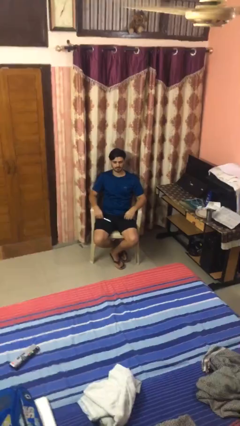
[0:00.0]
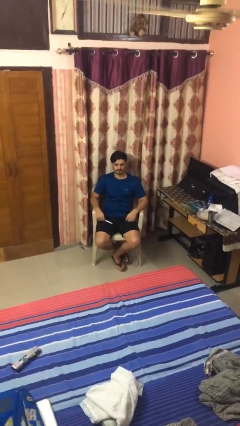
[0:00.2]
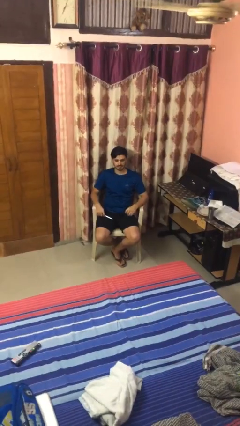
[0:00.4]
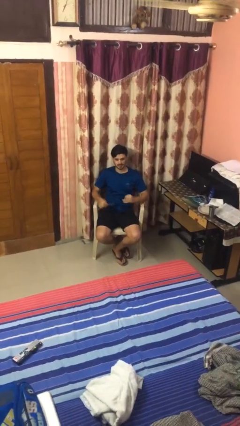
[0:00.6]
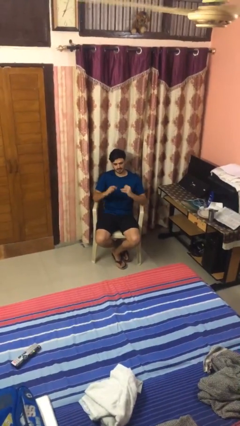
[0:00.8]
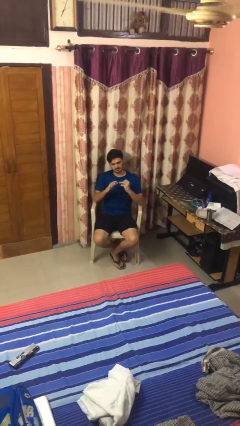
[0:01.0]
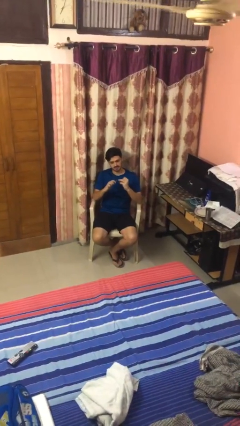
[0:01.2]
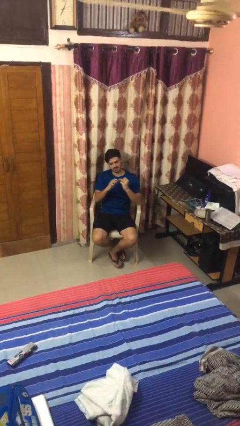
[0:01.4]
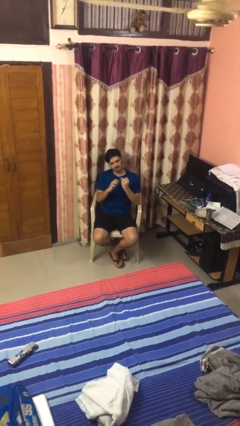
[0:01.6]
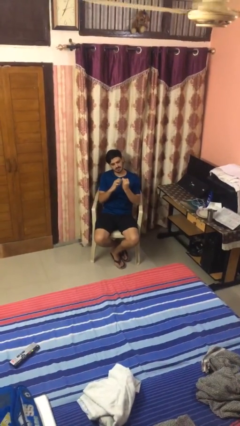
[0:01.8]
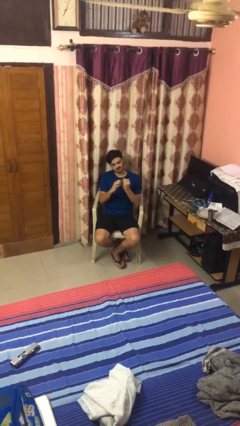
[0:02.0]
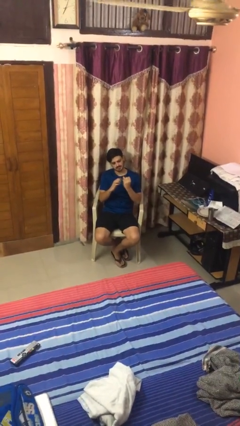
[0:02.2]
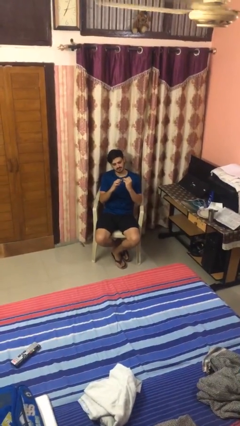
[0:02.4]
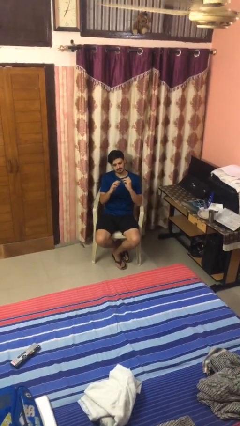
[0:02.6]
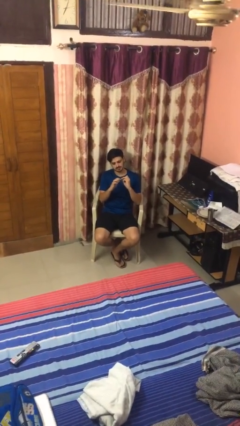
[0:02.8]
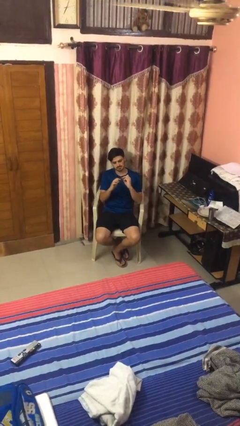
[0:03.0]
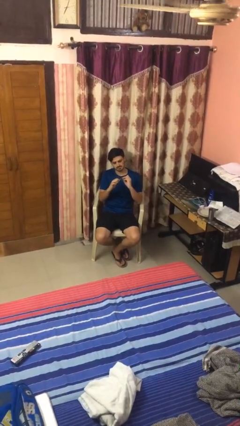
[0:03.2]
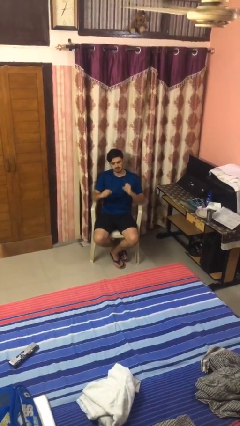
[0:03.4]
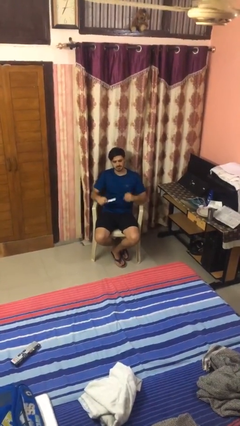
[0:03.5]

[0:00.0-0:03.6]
person files fingernails

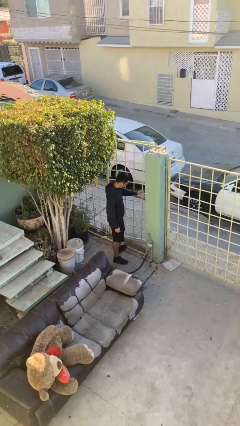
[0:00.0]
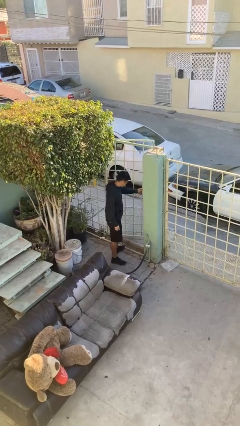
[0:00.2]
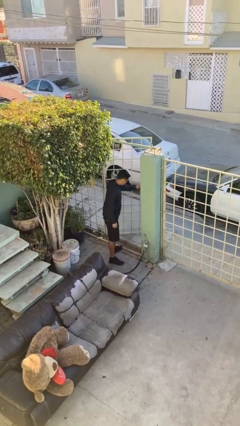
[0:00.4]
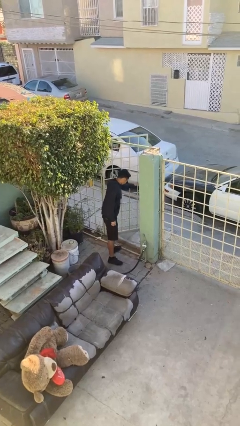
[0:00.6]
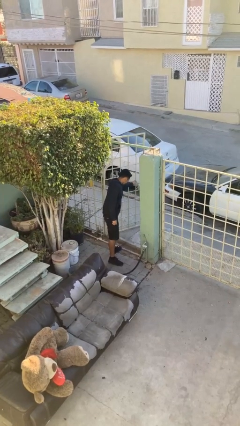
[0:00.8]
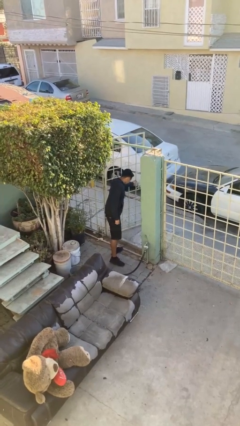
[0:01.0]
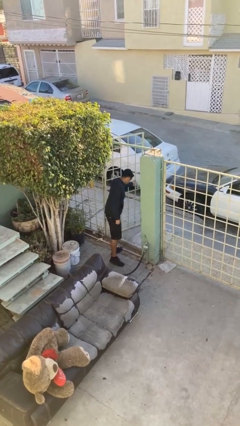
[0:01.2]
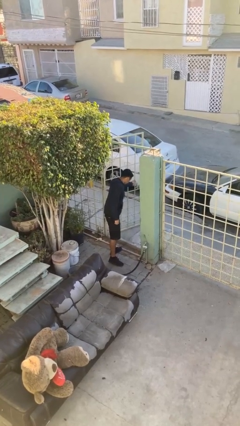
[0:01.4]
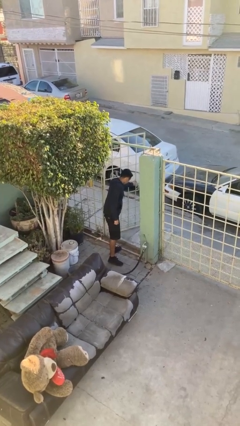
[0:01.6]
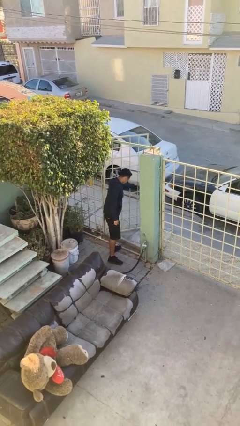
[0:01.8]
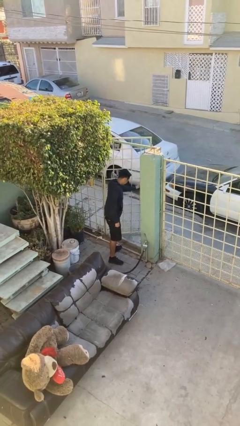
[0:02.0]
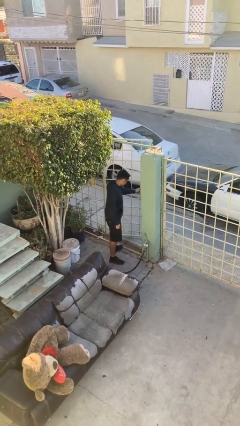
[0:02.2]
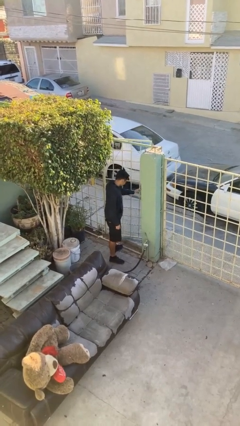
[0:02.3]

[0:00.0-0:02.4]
person opens facility door

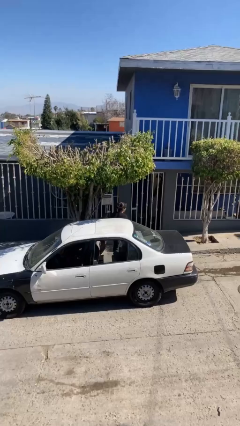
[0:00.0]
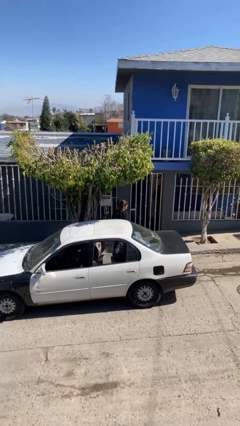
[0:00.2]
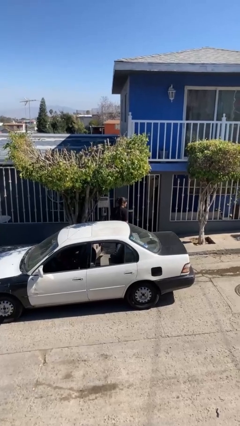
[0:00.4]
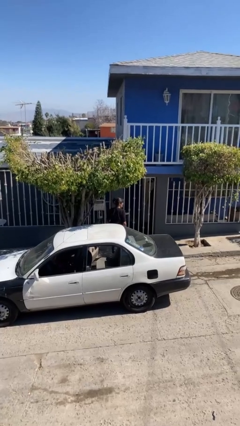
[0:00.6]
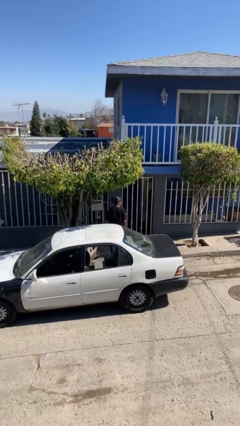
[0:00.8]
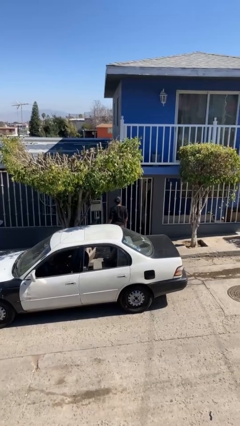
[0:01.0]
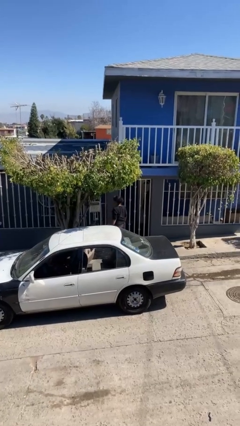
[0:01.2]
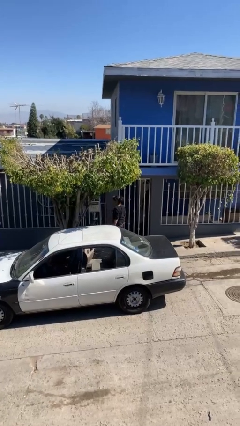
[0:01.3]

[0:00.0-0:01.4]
person exits car

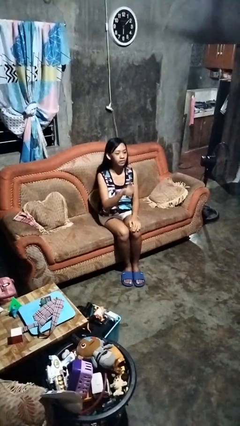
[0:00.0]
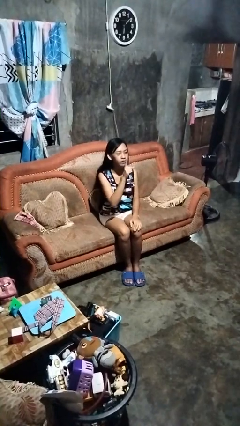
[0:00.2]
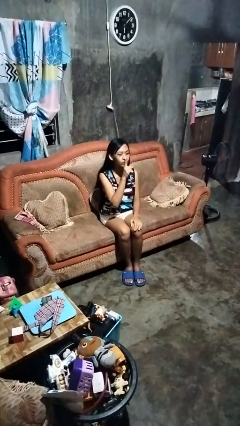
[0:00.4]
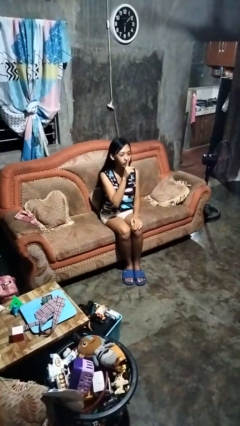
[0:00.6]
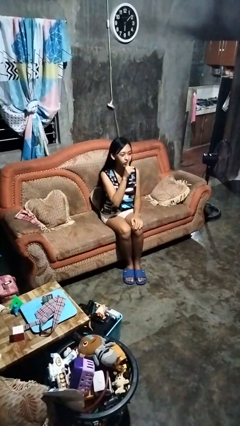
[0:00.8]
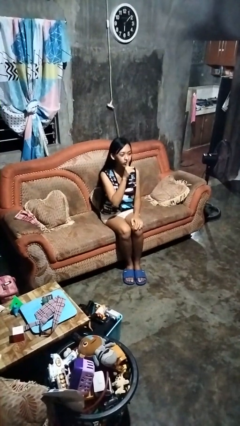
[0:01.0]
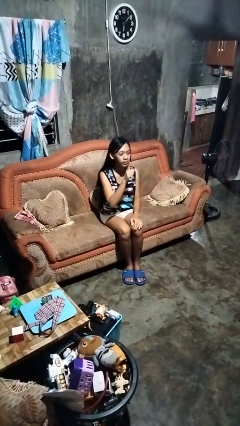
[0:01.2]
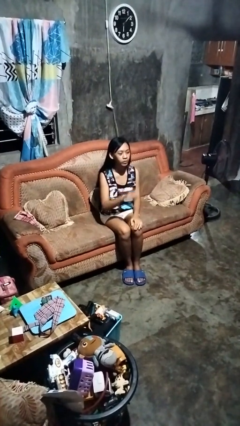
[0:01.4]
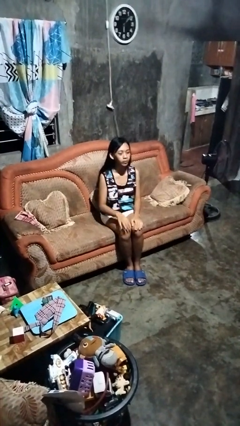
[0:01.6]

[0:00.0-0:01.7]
person gestures be quiet

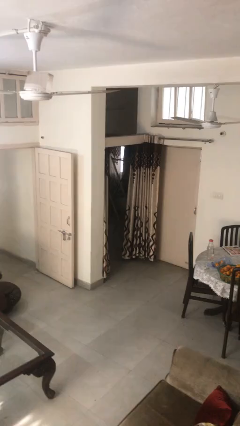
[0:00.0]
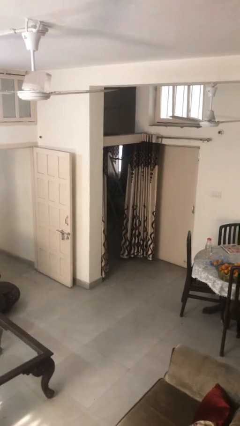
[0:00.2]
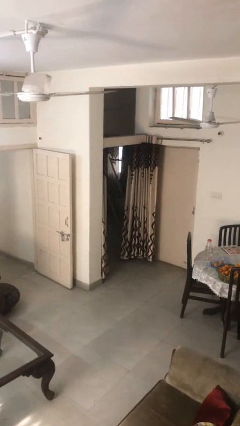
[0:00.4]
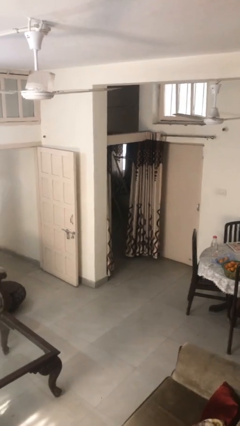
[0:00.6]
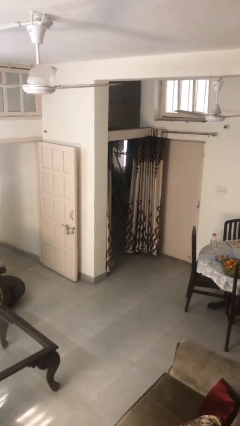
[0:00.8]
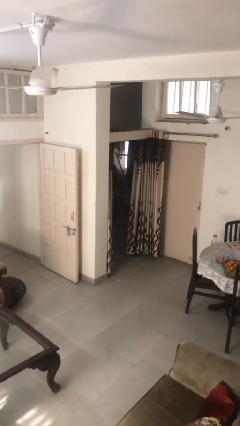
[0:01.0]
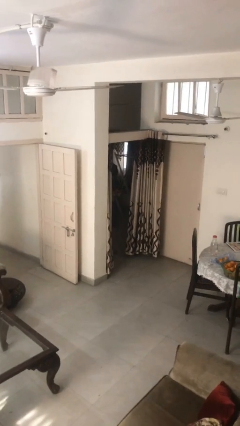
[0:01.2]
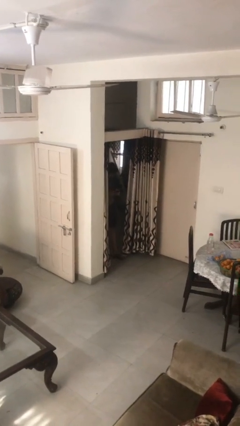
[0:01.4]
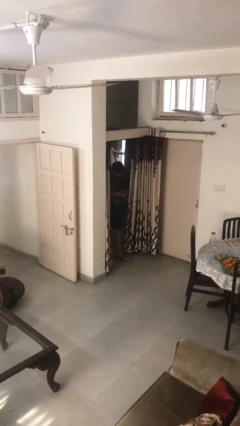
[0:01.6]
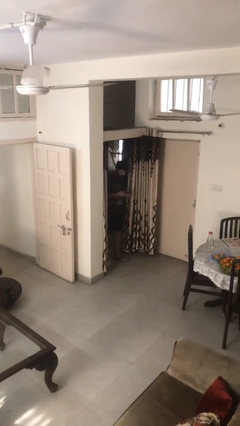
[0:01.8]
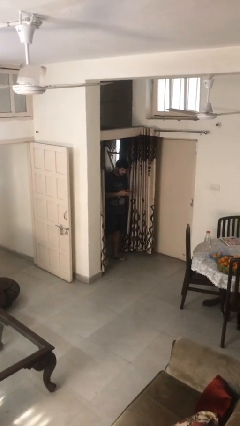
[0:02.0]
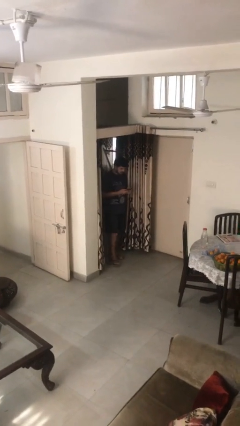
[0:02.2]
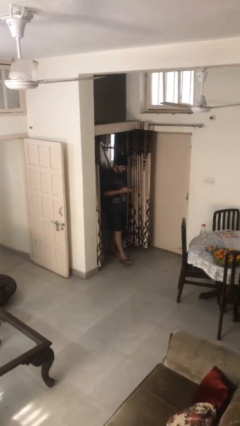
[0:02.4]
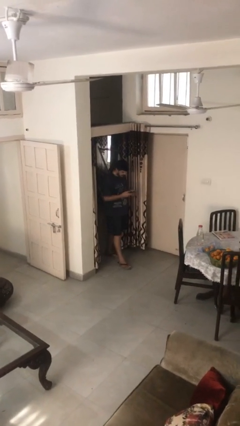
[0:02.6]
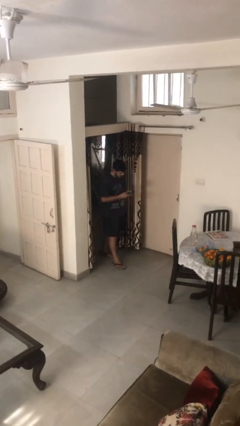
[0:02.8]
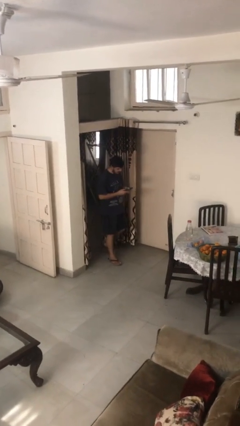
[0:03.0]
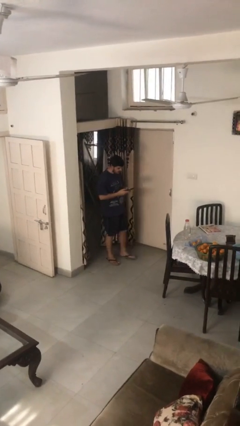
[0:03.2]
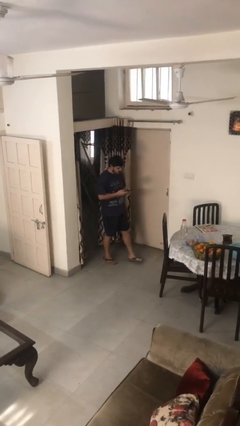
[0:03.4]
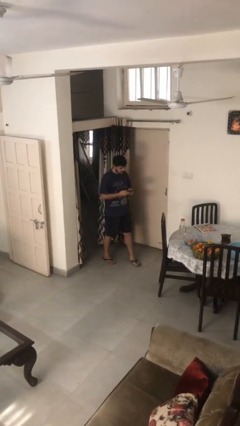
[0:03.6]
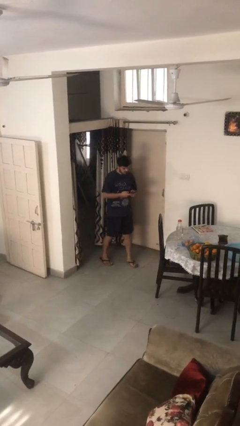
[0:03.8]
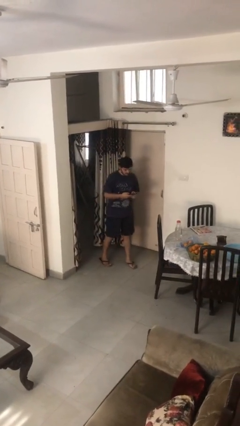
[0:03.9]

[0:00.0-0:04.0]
person enters scene through structure

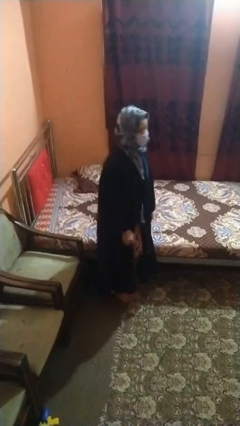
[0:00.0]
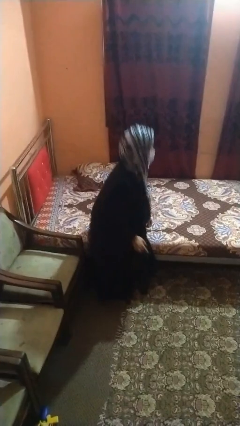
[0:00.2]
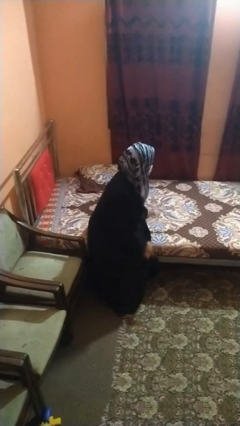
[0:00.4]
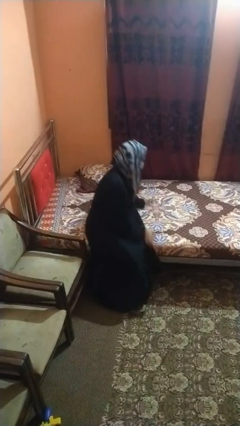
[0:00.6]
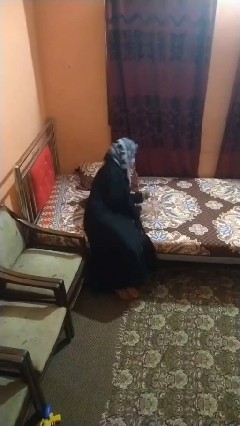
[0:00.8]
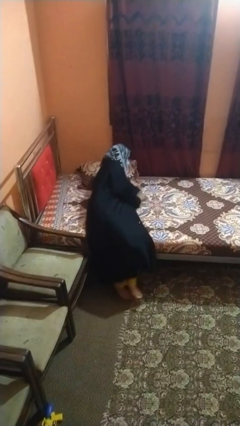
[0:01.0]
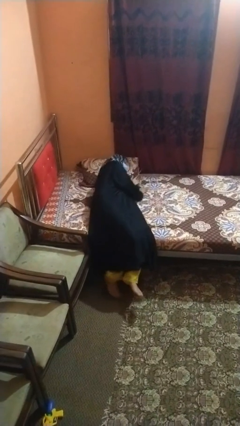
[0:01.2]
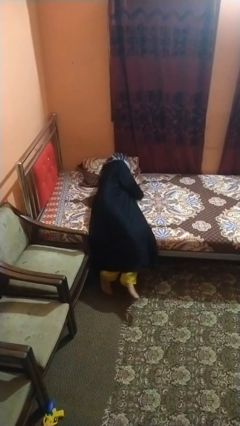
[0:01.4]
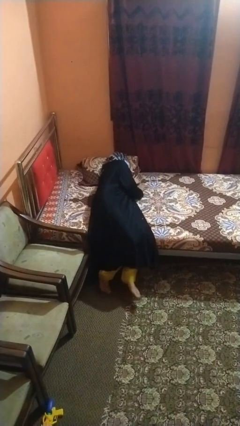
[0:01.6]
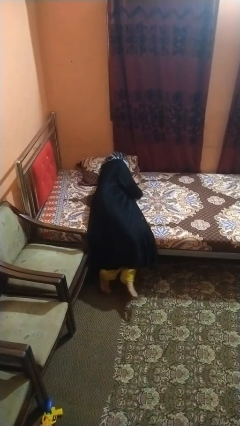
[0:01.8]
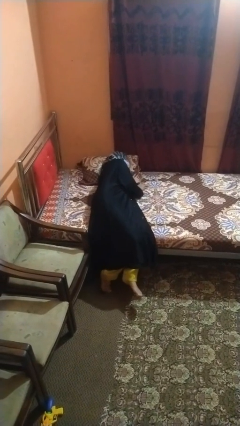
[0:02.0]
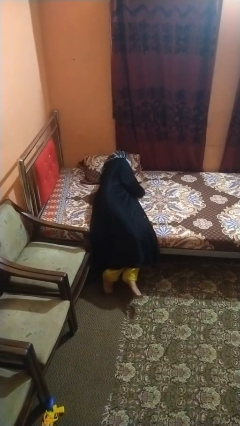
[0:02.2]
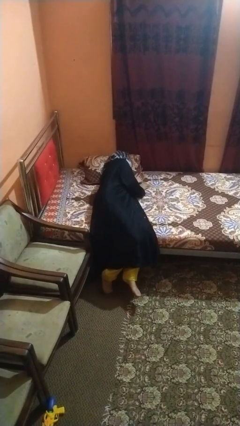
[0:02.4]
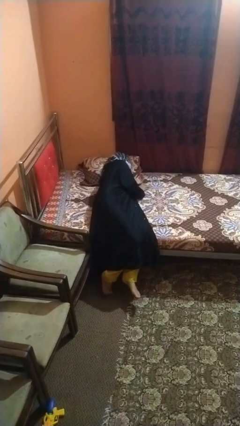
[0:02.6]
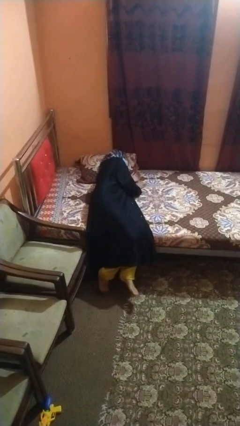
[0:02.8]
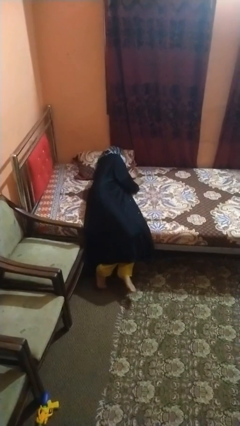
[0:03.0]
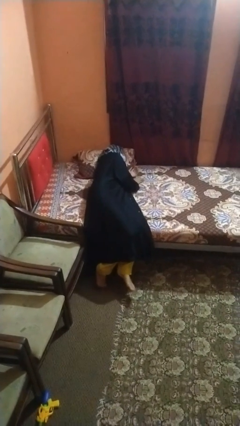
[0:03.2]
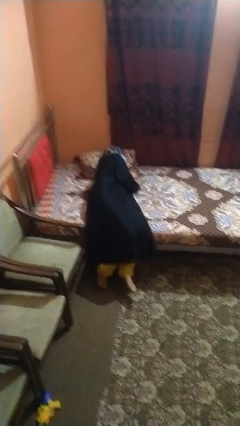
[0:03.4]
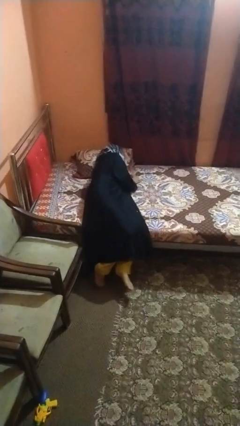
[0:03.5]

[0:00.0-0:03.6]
person lies down on bed

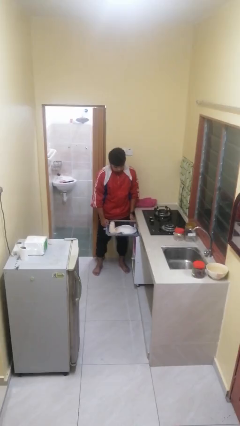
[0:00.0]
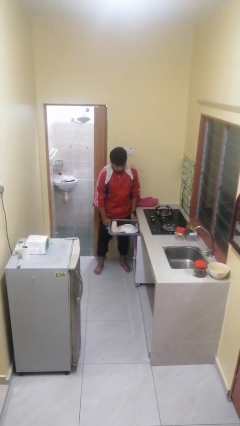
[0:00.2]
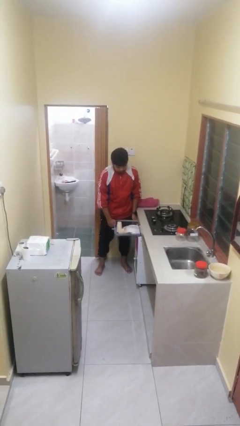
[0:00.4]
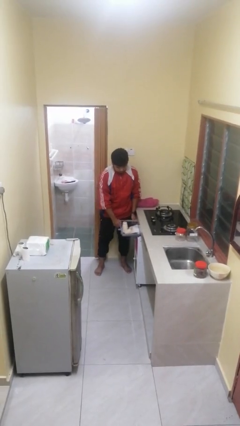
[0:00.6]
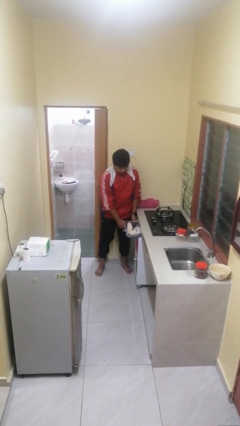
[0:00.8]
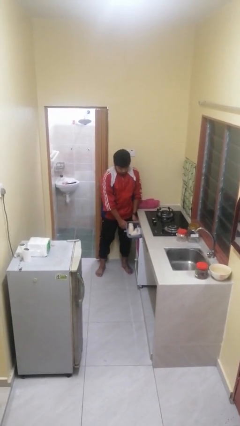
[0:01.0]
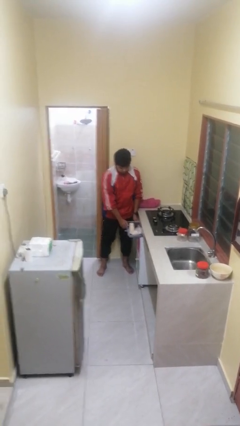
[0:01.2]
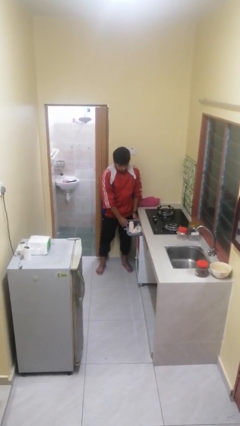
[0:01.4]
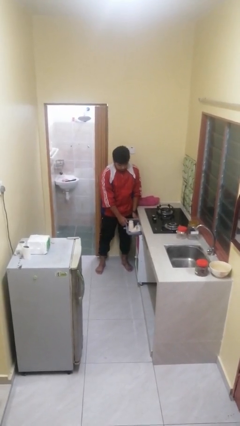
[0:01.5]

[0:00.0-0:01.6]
person closes kitchen drawer
